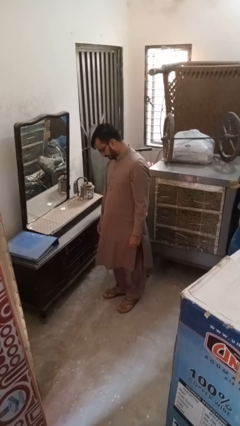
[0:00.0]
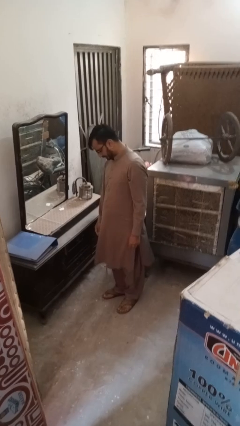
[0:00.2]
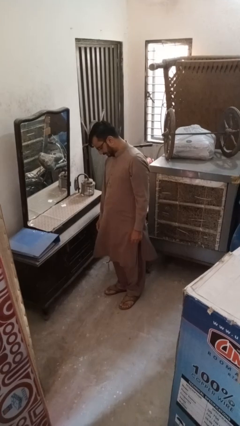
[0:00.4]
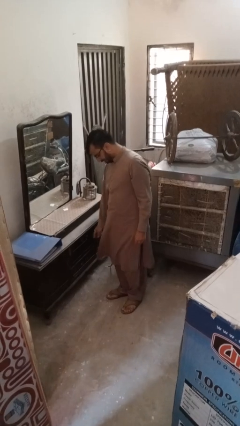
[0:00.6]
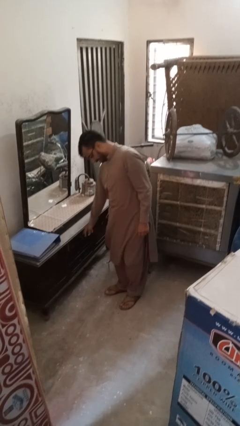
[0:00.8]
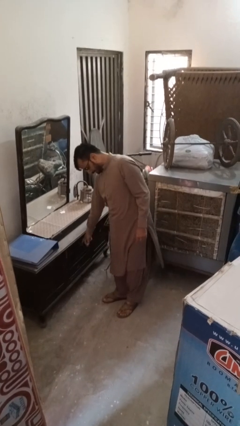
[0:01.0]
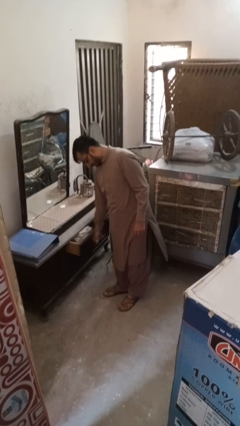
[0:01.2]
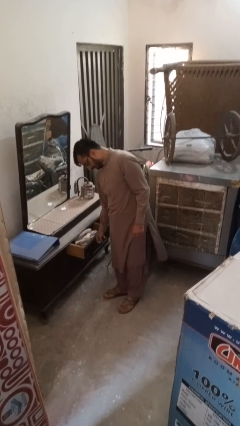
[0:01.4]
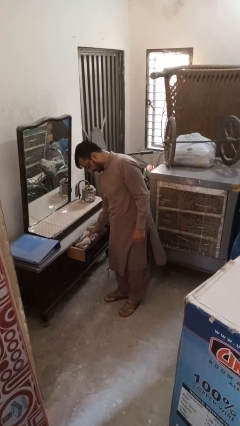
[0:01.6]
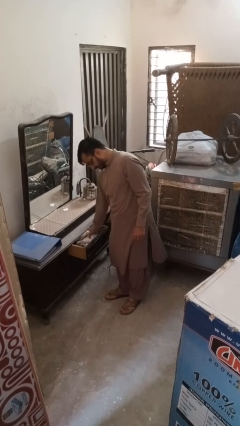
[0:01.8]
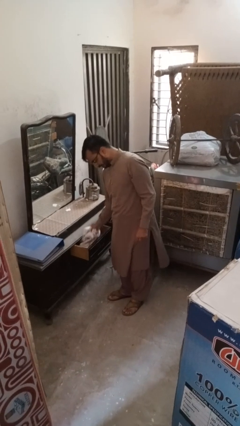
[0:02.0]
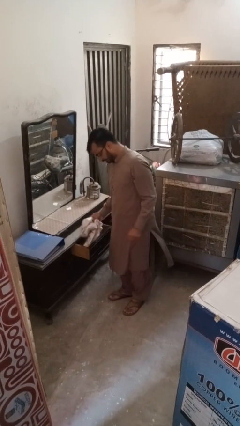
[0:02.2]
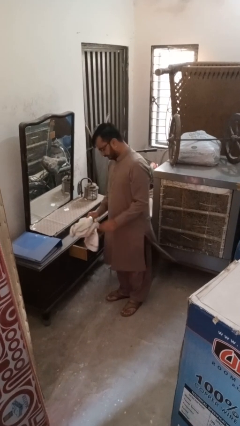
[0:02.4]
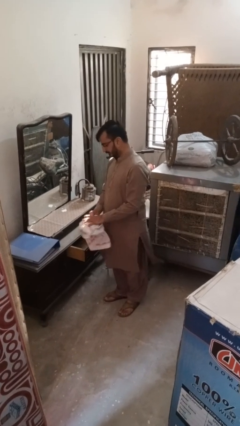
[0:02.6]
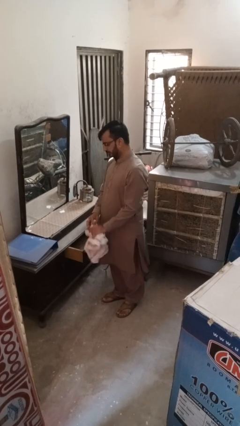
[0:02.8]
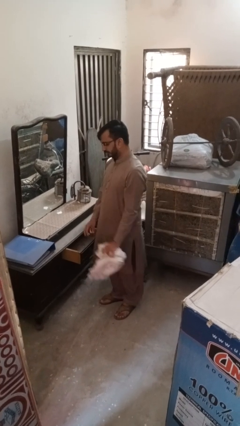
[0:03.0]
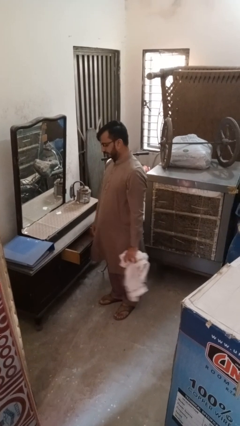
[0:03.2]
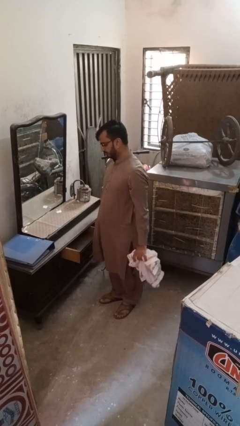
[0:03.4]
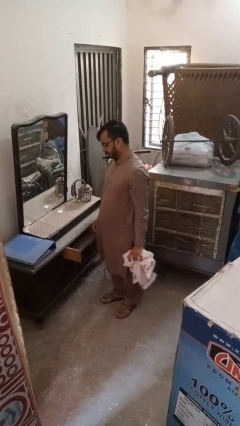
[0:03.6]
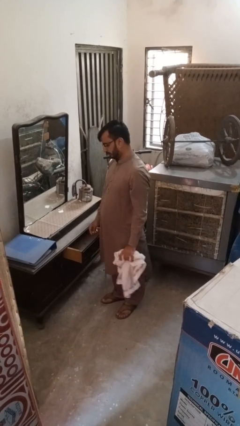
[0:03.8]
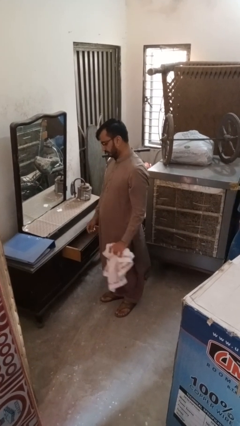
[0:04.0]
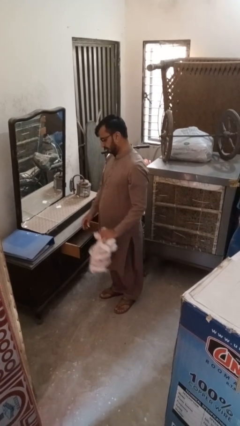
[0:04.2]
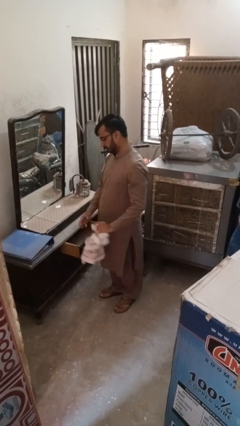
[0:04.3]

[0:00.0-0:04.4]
person takes clothes from dresser

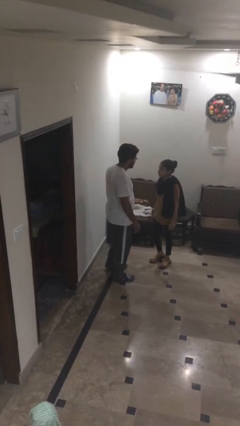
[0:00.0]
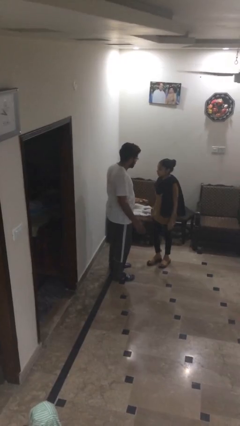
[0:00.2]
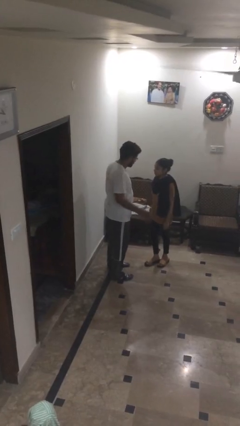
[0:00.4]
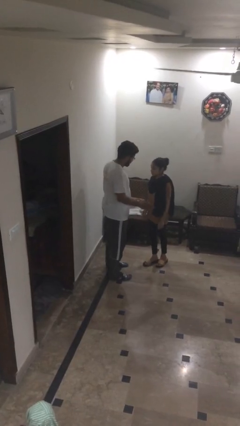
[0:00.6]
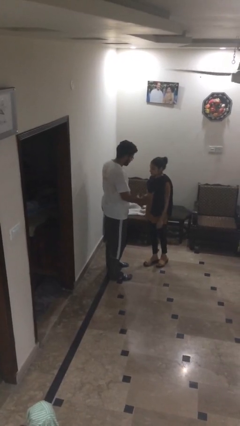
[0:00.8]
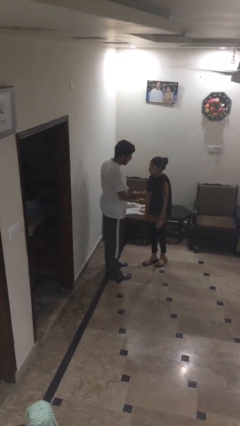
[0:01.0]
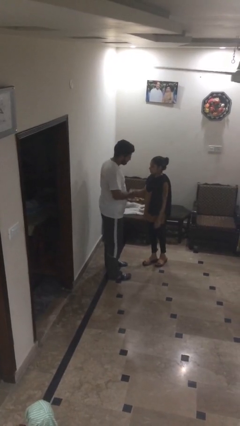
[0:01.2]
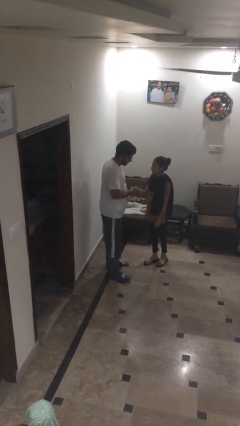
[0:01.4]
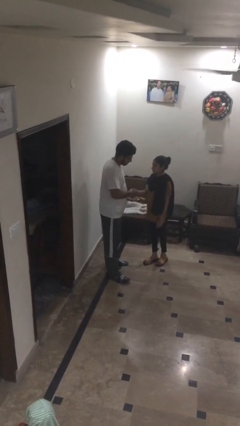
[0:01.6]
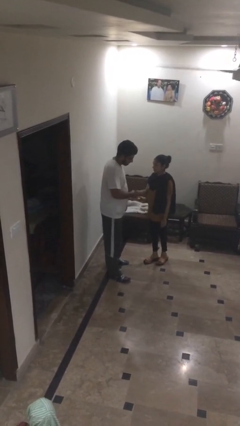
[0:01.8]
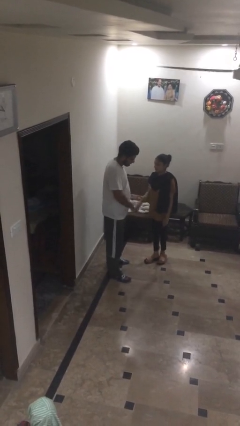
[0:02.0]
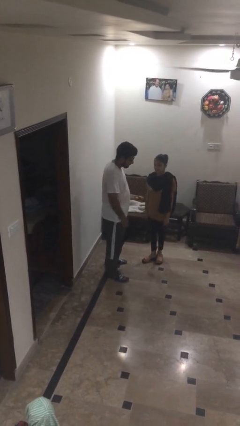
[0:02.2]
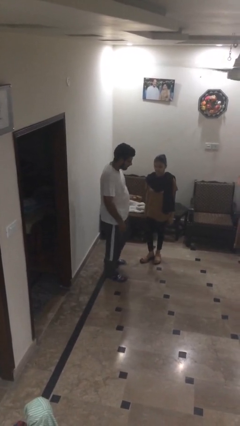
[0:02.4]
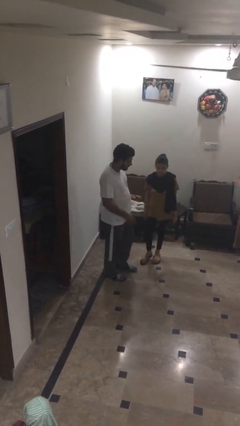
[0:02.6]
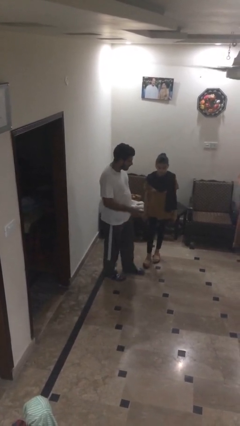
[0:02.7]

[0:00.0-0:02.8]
person shakes hand

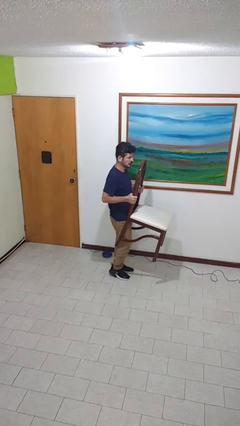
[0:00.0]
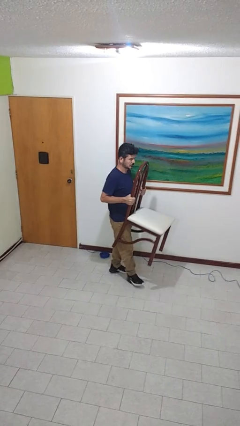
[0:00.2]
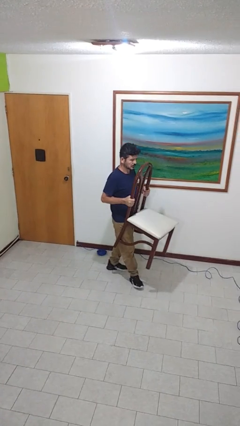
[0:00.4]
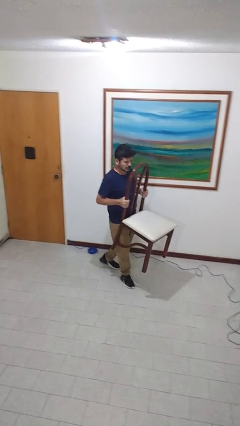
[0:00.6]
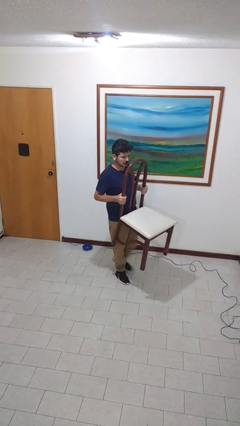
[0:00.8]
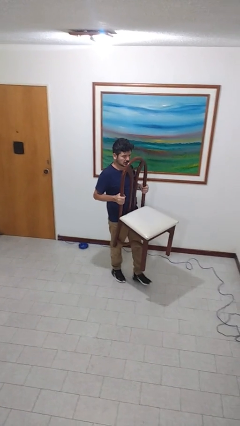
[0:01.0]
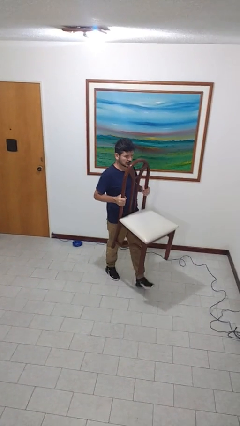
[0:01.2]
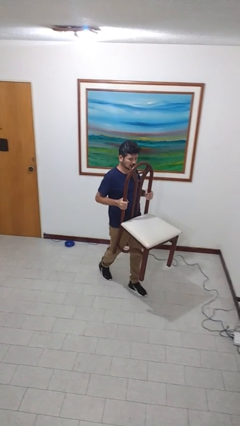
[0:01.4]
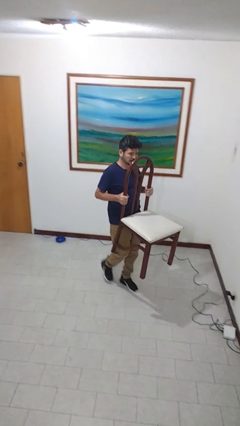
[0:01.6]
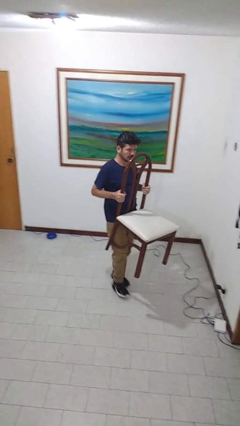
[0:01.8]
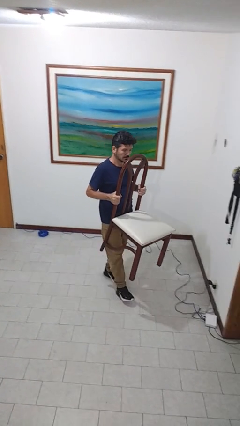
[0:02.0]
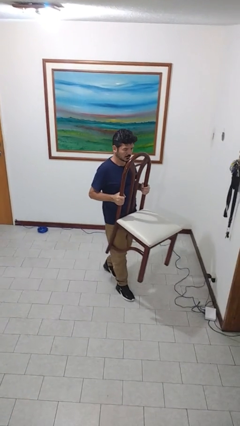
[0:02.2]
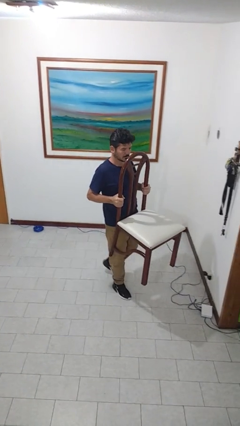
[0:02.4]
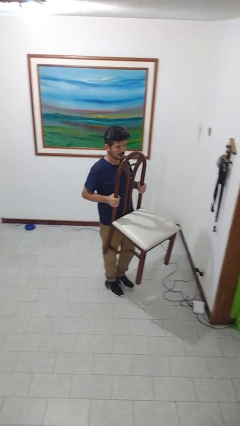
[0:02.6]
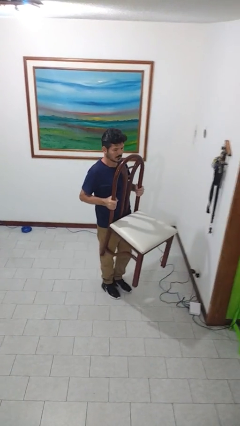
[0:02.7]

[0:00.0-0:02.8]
person carries furniture

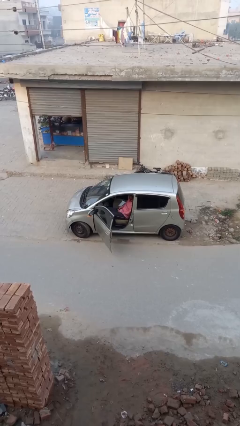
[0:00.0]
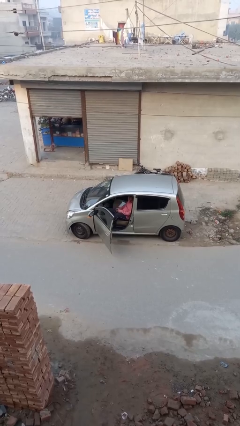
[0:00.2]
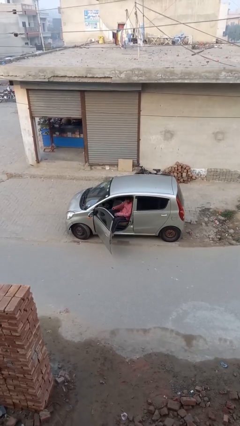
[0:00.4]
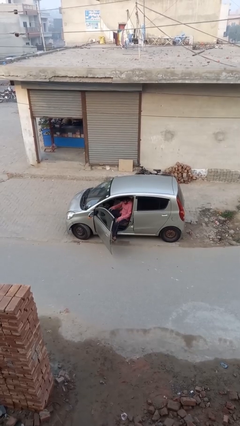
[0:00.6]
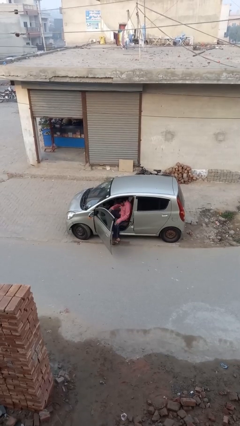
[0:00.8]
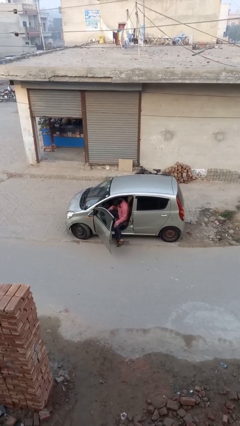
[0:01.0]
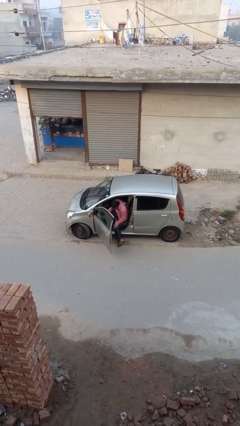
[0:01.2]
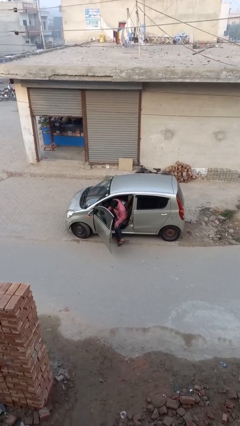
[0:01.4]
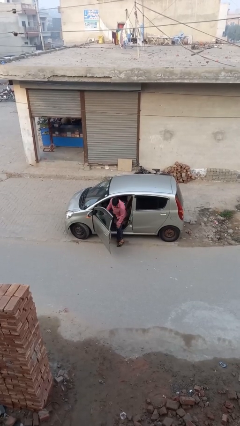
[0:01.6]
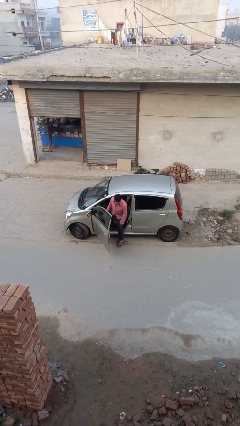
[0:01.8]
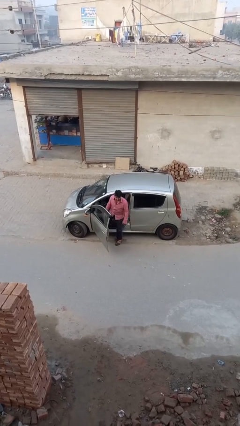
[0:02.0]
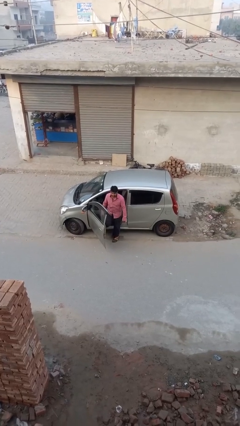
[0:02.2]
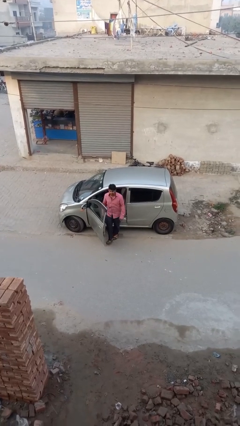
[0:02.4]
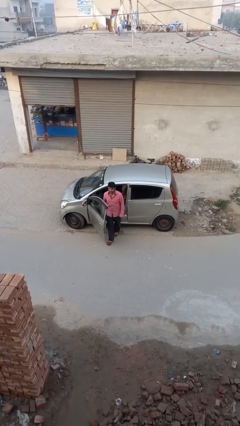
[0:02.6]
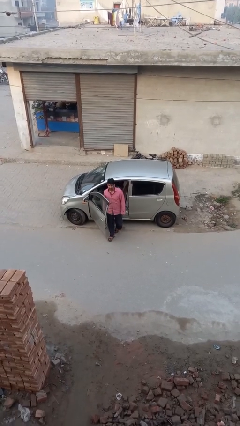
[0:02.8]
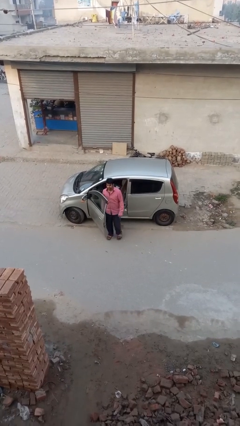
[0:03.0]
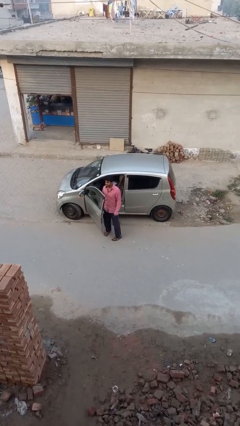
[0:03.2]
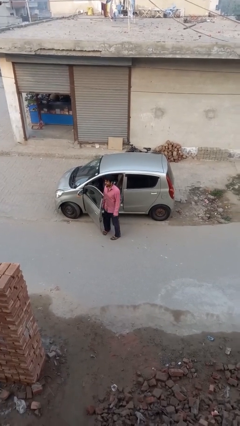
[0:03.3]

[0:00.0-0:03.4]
person exits car

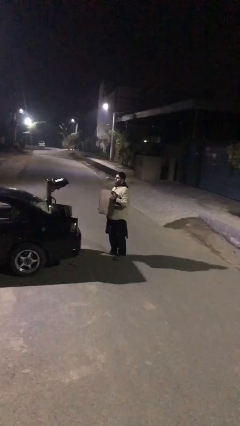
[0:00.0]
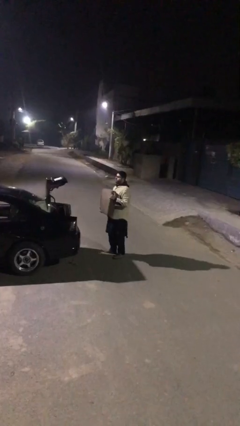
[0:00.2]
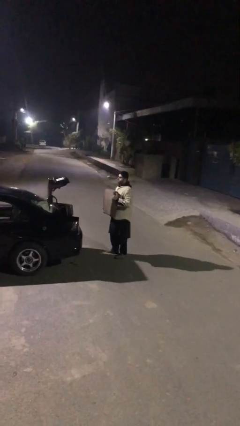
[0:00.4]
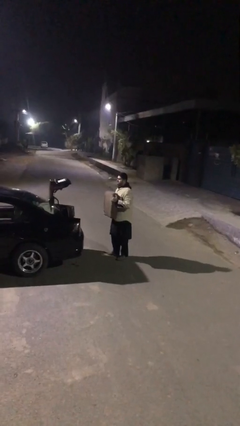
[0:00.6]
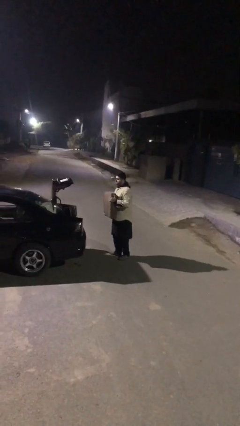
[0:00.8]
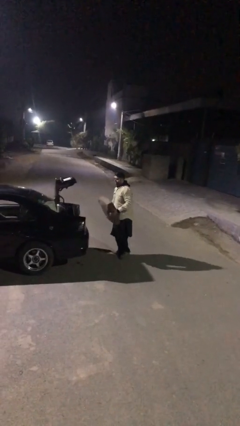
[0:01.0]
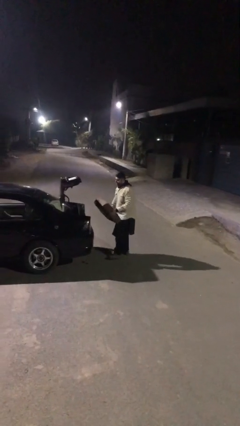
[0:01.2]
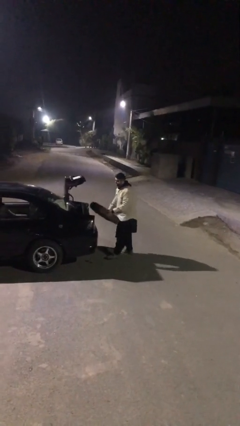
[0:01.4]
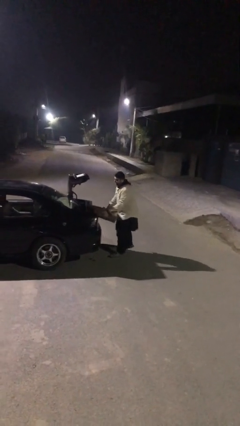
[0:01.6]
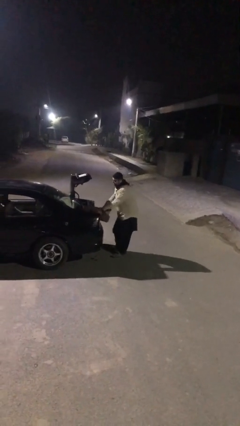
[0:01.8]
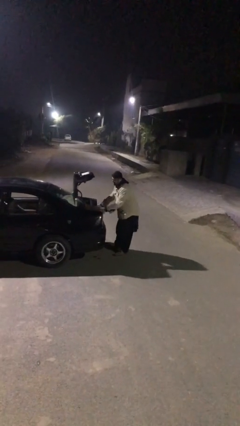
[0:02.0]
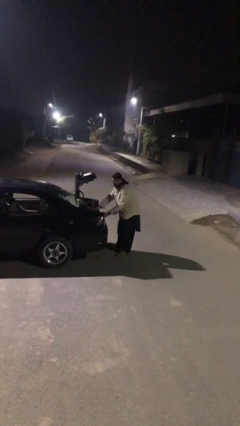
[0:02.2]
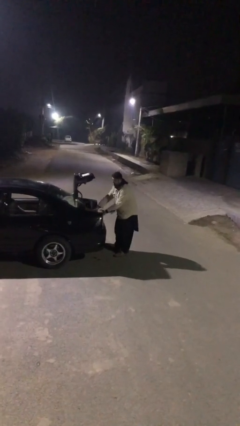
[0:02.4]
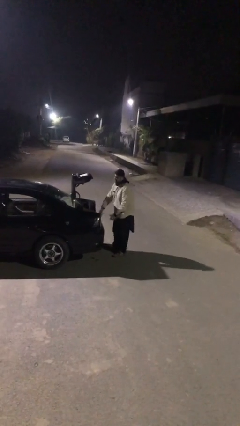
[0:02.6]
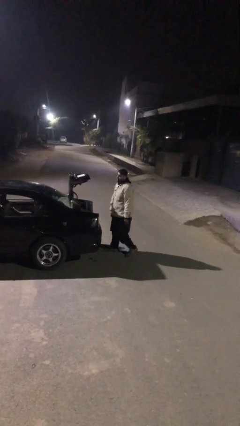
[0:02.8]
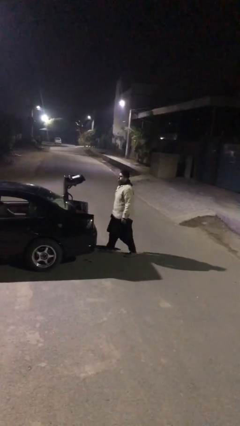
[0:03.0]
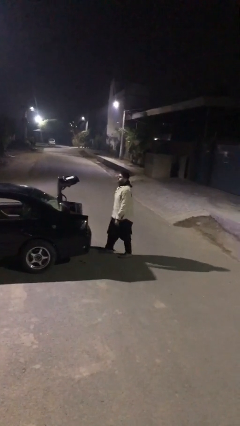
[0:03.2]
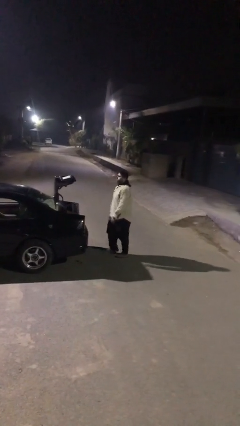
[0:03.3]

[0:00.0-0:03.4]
person loads car

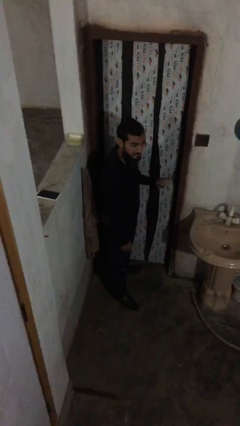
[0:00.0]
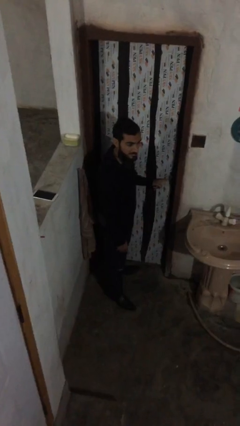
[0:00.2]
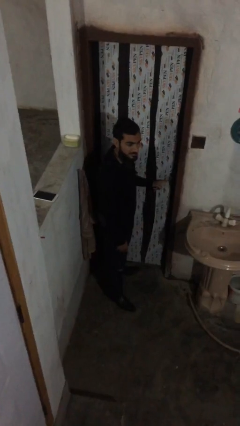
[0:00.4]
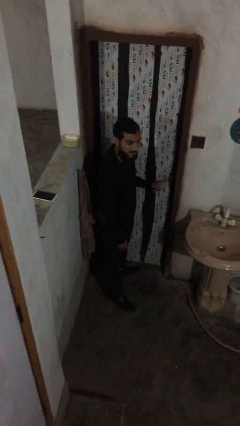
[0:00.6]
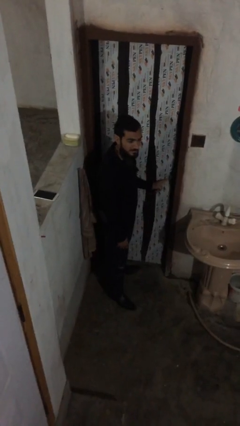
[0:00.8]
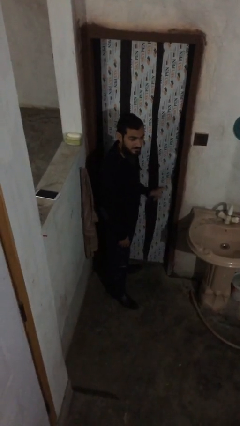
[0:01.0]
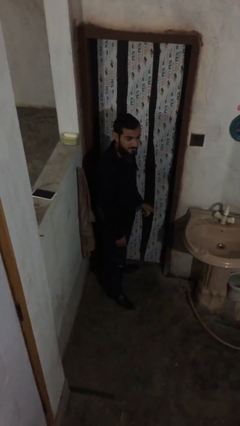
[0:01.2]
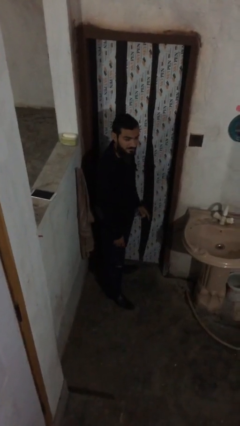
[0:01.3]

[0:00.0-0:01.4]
person opens facility door
